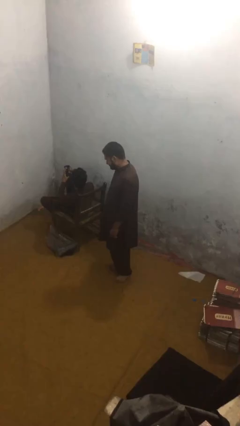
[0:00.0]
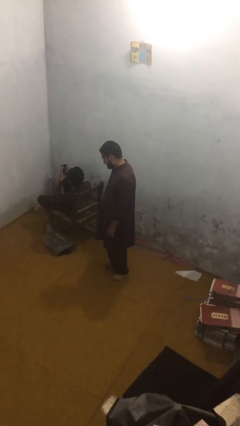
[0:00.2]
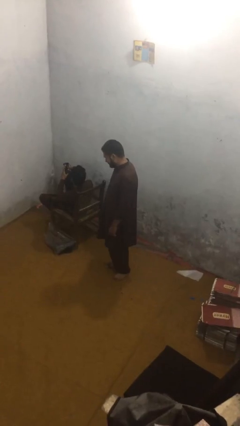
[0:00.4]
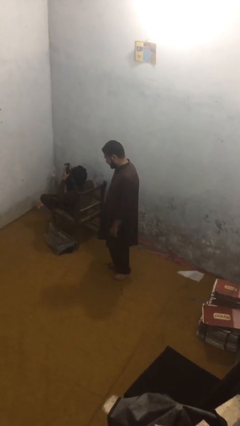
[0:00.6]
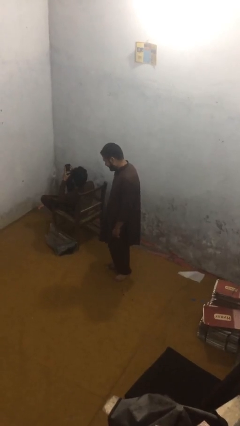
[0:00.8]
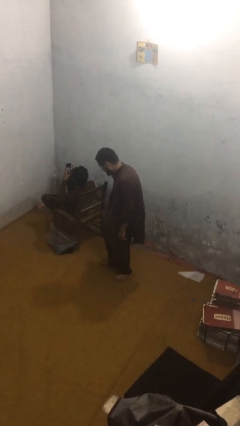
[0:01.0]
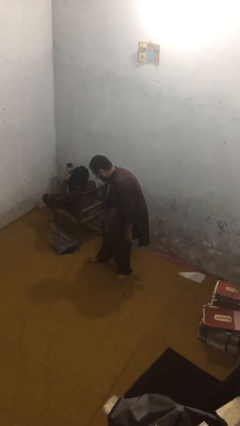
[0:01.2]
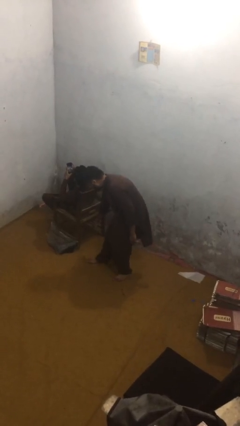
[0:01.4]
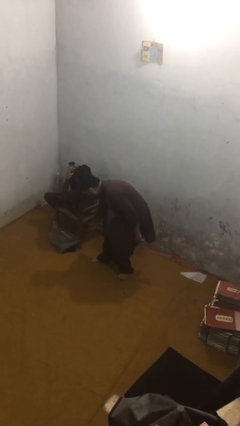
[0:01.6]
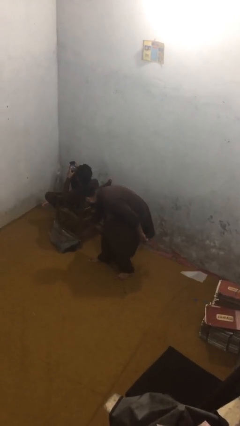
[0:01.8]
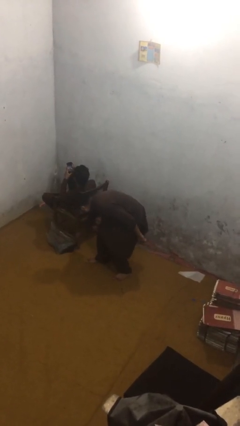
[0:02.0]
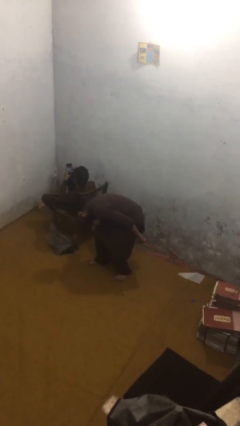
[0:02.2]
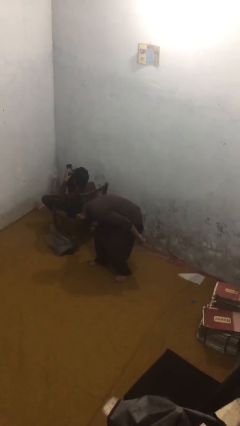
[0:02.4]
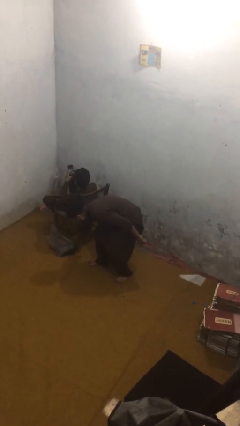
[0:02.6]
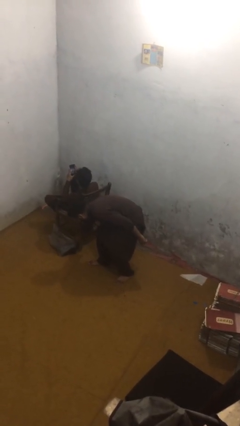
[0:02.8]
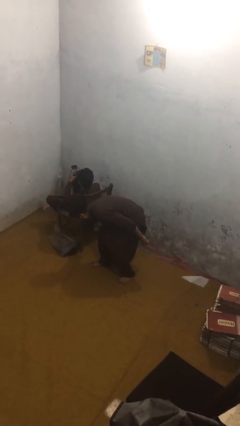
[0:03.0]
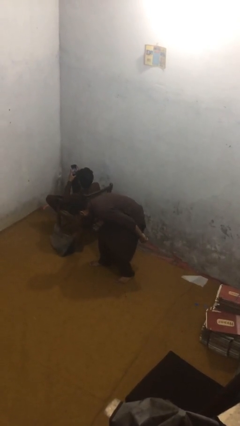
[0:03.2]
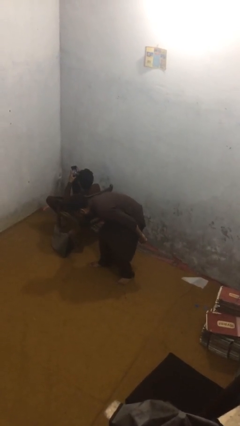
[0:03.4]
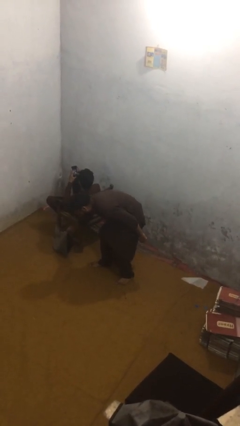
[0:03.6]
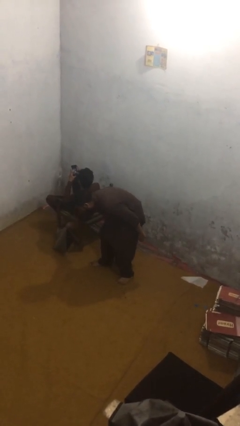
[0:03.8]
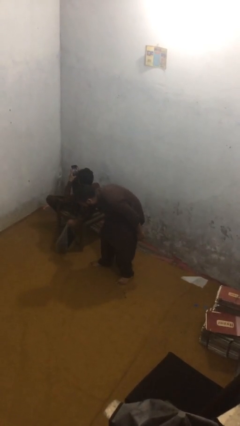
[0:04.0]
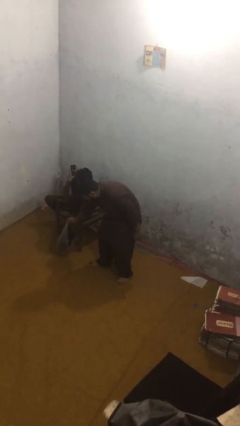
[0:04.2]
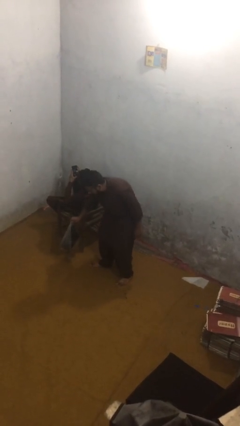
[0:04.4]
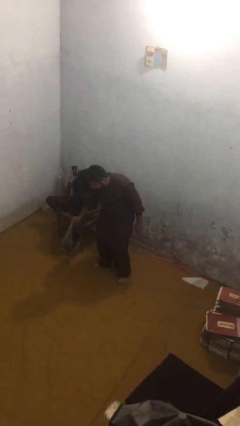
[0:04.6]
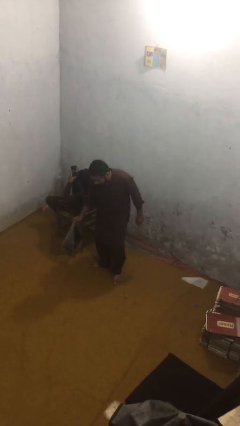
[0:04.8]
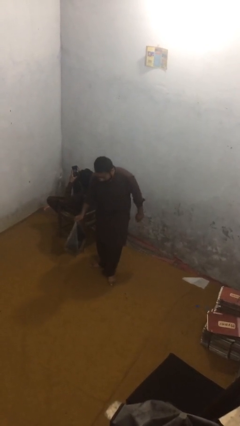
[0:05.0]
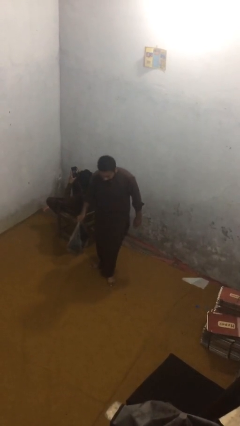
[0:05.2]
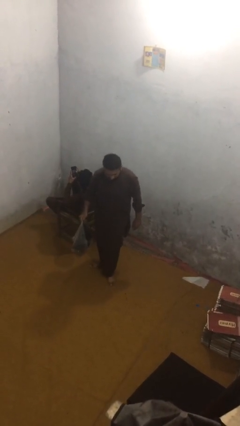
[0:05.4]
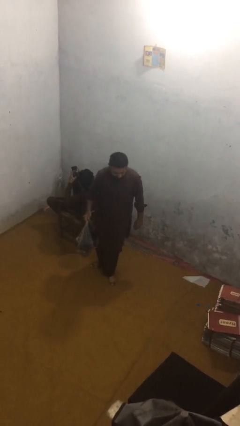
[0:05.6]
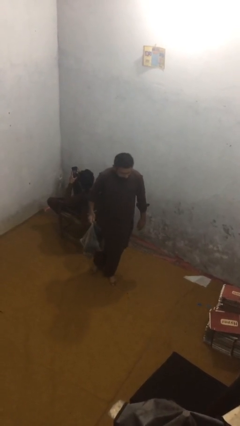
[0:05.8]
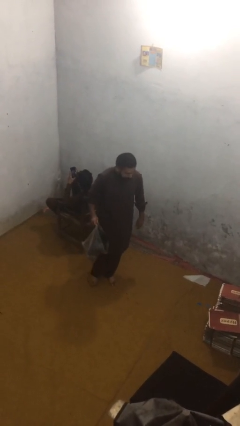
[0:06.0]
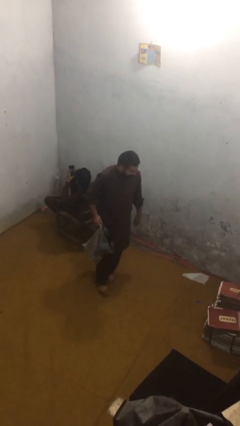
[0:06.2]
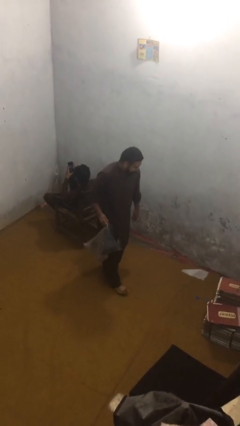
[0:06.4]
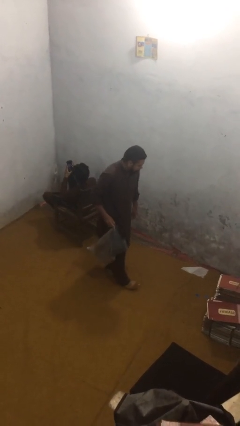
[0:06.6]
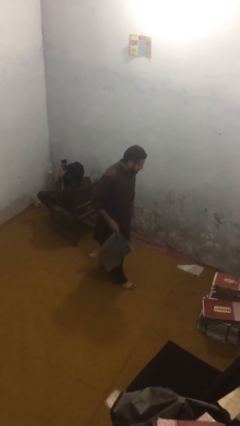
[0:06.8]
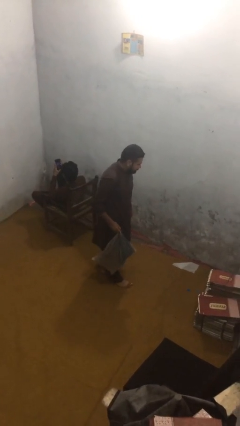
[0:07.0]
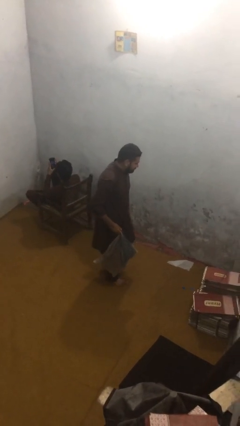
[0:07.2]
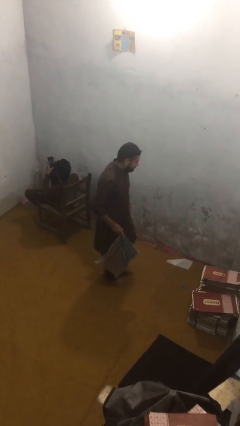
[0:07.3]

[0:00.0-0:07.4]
person steals object from person

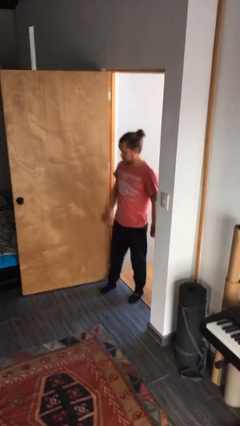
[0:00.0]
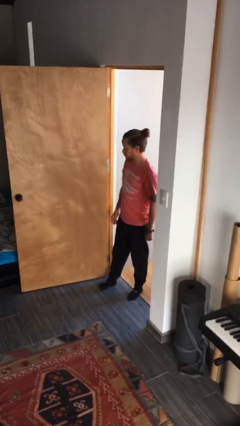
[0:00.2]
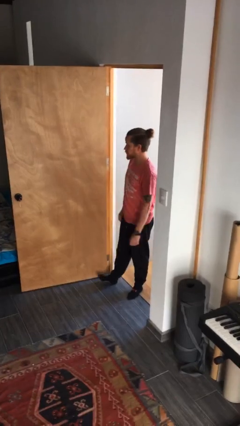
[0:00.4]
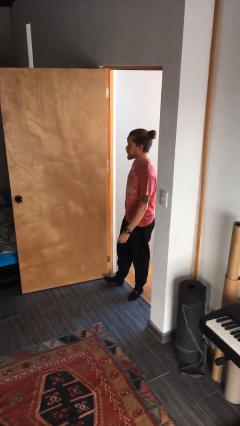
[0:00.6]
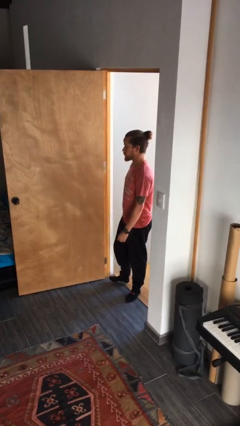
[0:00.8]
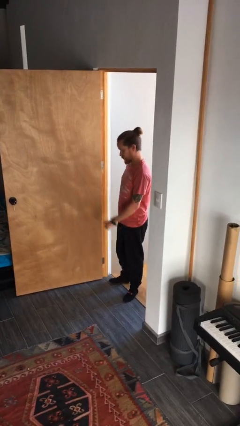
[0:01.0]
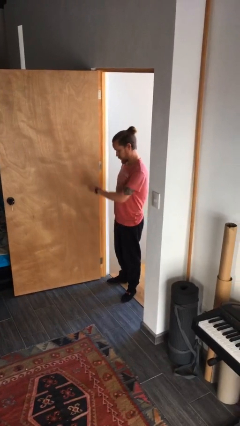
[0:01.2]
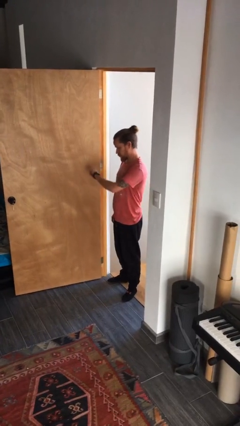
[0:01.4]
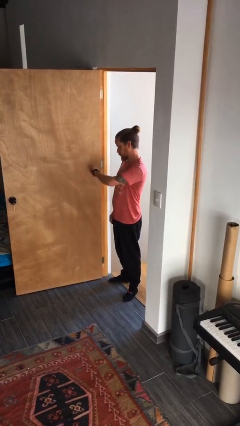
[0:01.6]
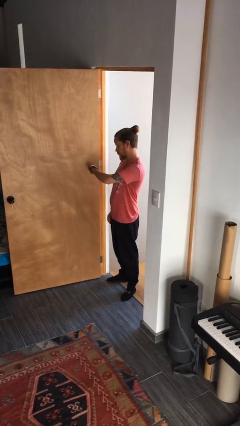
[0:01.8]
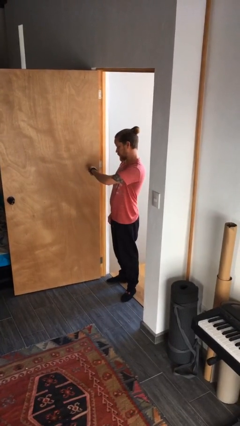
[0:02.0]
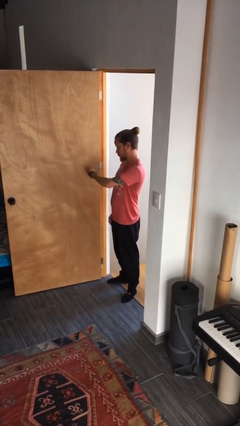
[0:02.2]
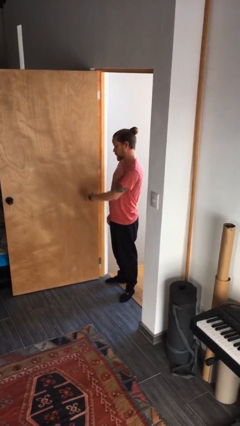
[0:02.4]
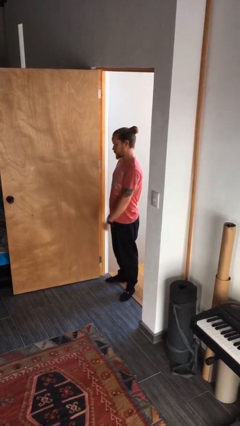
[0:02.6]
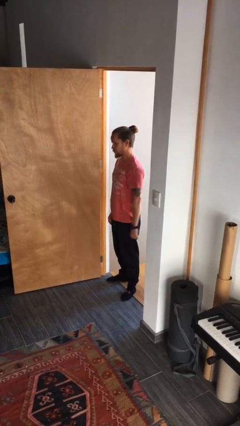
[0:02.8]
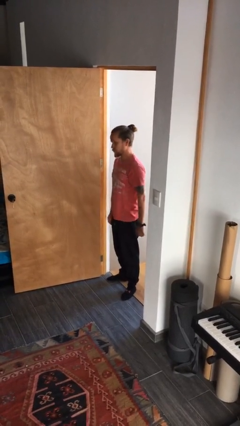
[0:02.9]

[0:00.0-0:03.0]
person looks at wristwatch

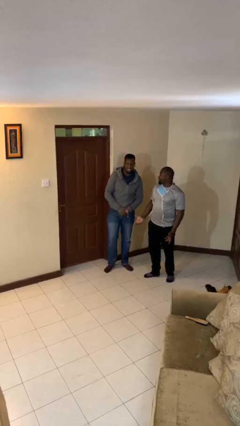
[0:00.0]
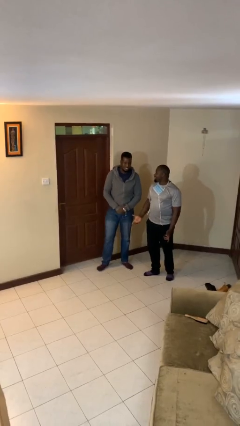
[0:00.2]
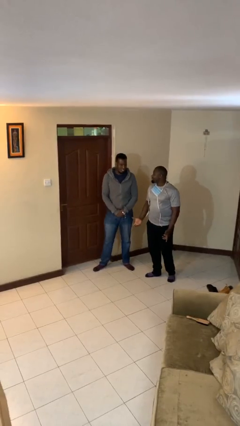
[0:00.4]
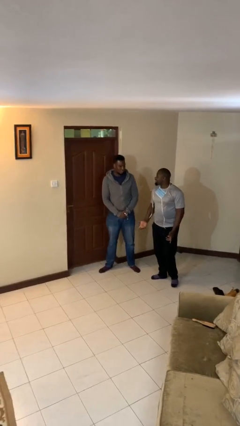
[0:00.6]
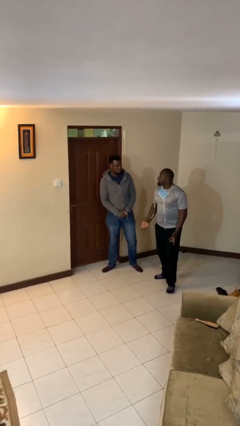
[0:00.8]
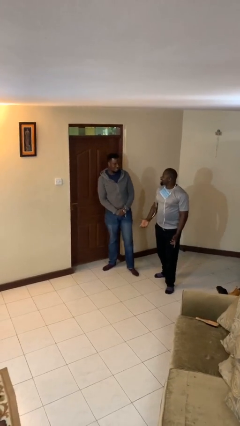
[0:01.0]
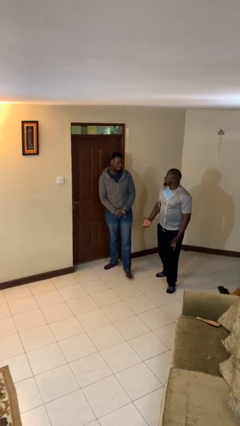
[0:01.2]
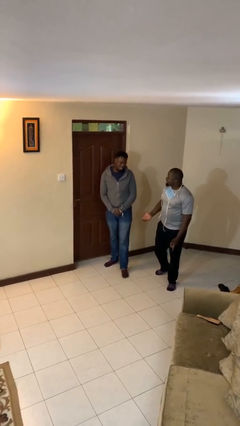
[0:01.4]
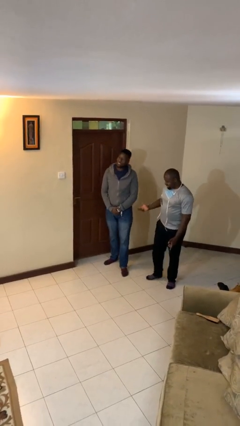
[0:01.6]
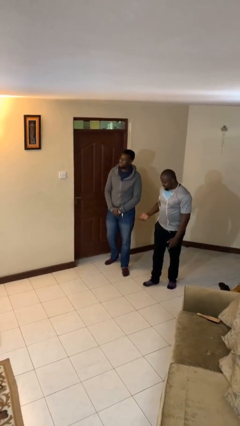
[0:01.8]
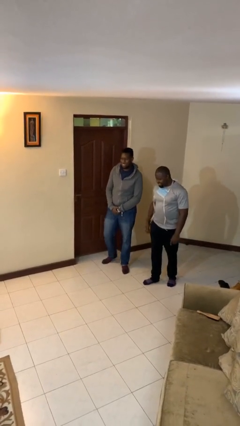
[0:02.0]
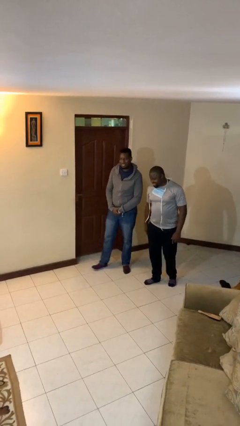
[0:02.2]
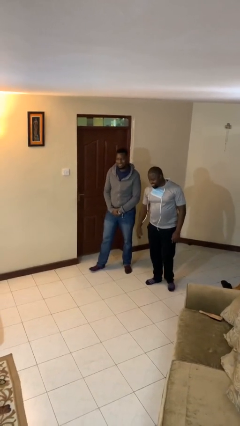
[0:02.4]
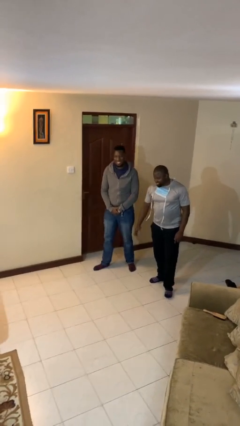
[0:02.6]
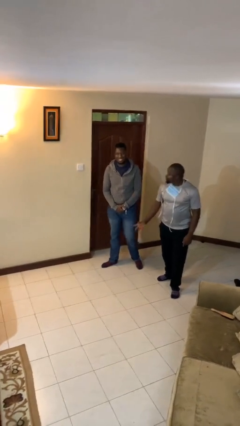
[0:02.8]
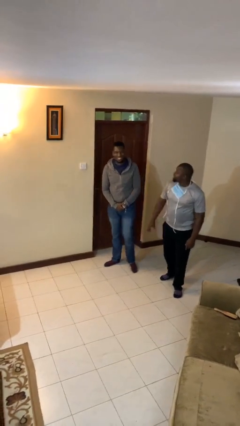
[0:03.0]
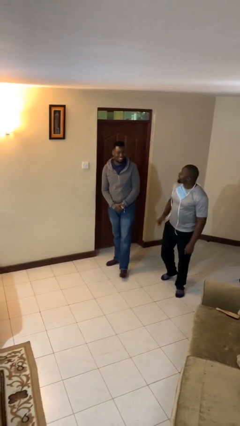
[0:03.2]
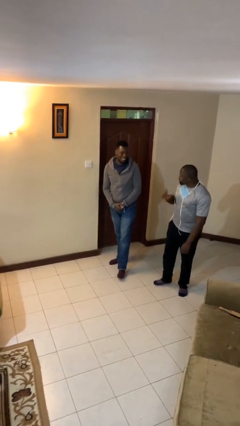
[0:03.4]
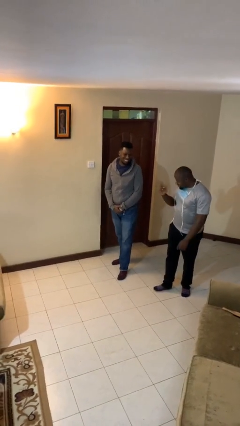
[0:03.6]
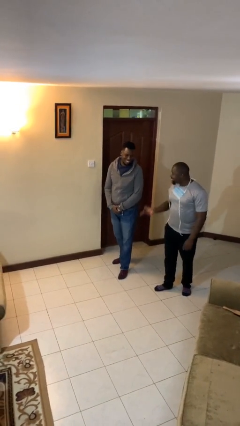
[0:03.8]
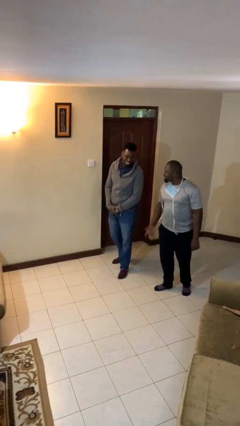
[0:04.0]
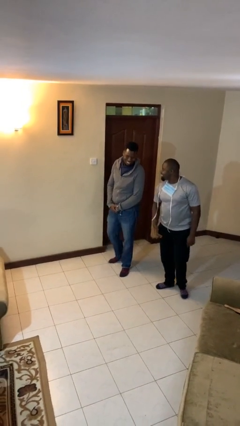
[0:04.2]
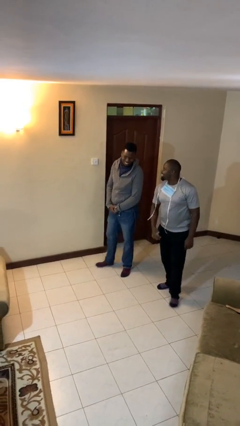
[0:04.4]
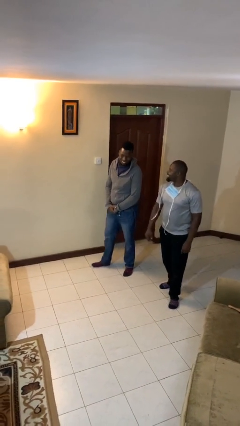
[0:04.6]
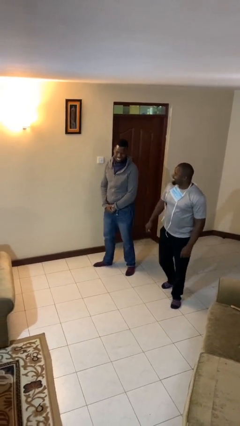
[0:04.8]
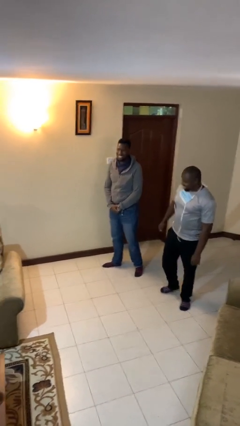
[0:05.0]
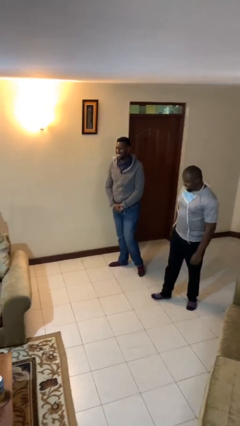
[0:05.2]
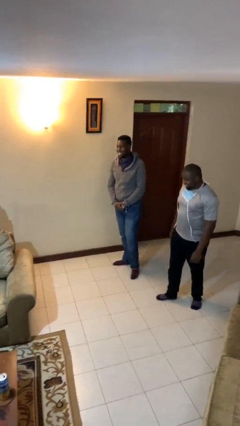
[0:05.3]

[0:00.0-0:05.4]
person talks to person

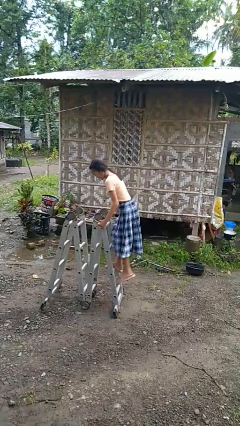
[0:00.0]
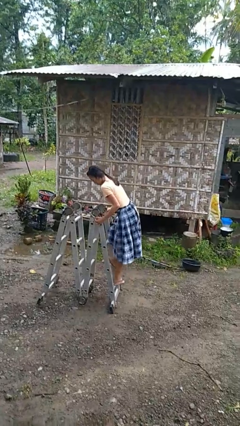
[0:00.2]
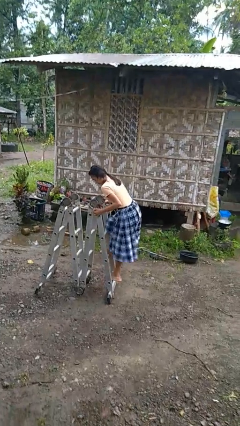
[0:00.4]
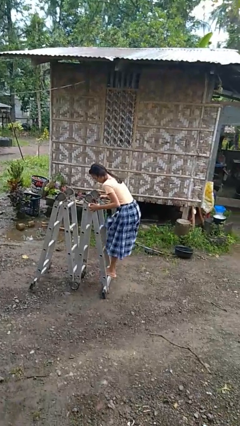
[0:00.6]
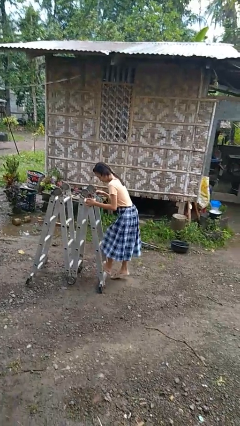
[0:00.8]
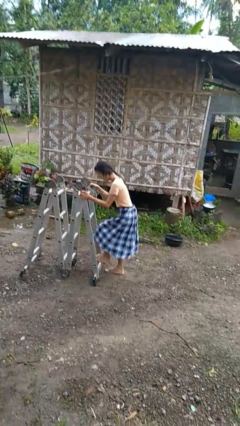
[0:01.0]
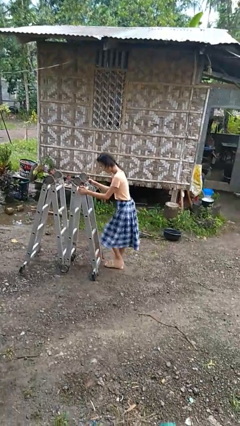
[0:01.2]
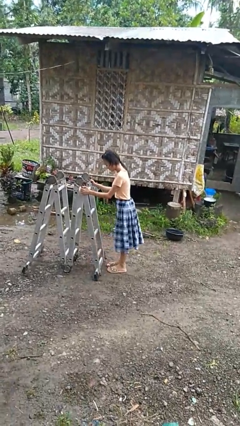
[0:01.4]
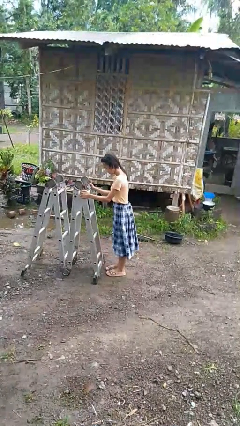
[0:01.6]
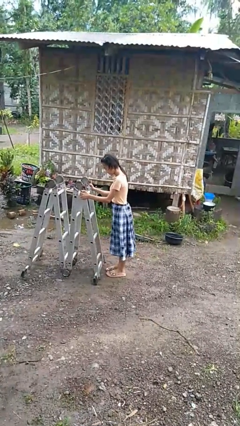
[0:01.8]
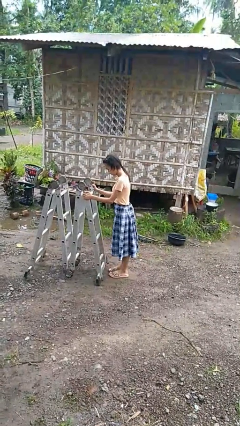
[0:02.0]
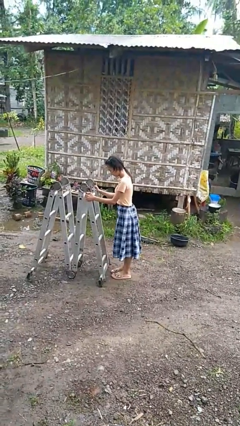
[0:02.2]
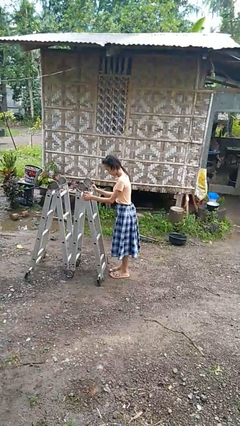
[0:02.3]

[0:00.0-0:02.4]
person climbs down ladder
